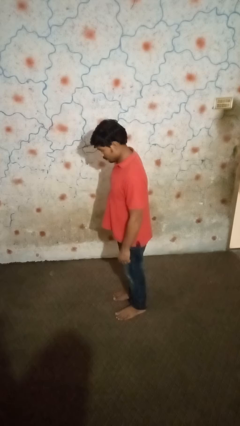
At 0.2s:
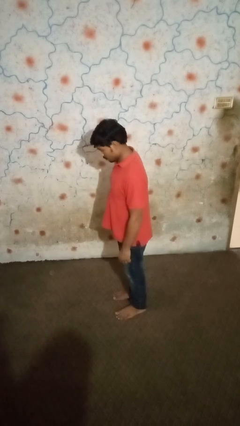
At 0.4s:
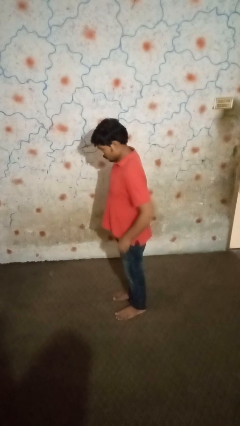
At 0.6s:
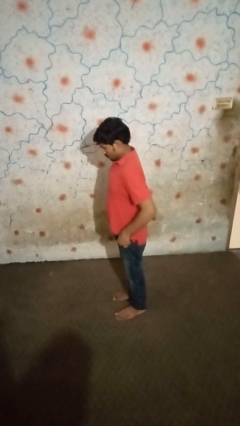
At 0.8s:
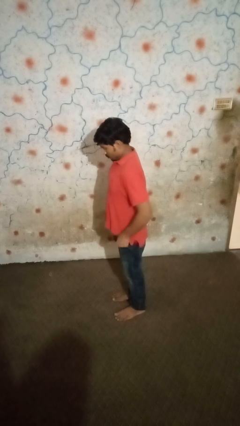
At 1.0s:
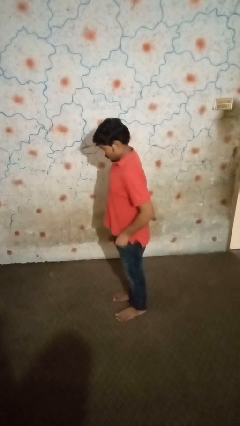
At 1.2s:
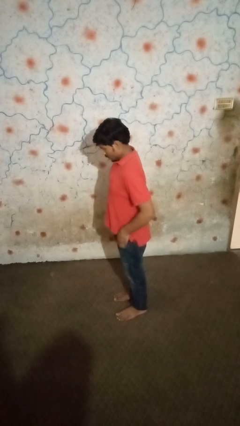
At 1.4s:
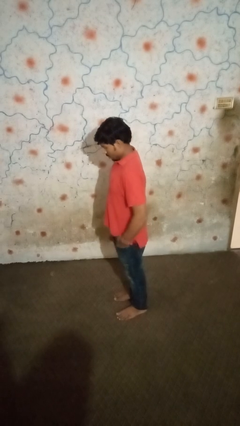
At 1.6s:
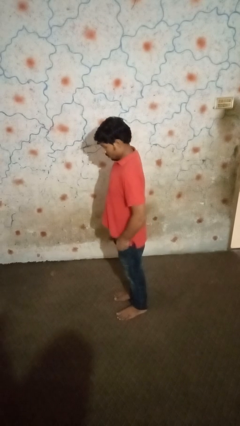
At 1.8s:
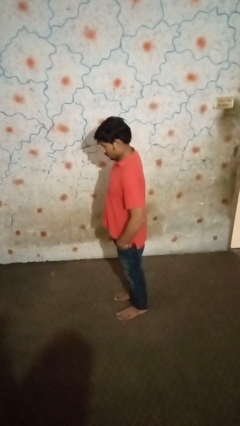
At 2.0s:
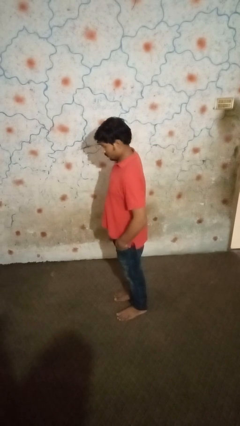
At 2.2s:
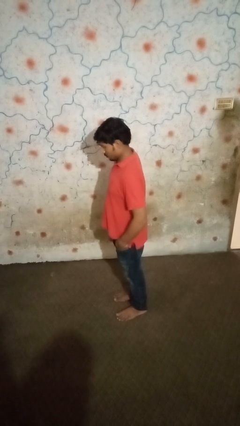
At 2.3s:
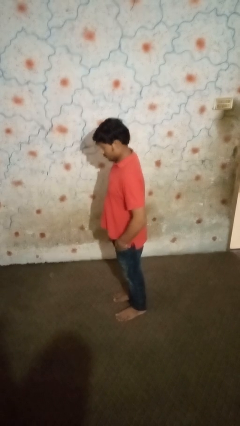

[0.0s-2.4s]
person puts hands in back pockets

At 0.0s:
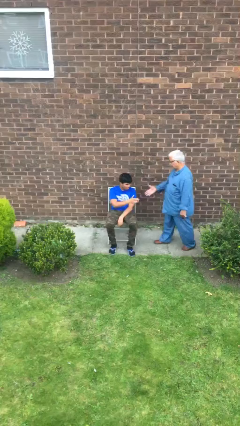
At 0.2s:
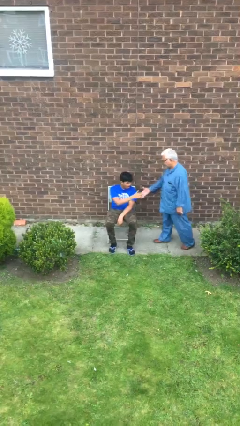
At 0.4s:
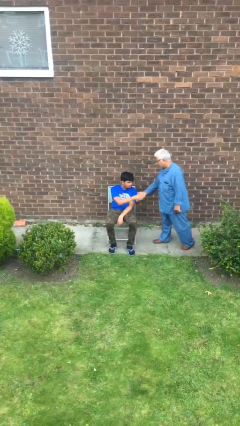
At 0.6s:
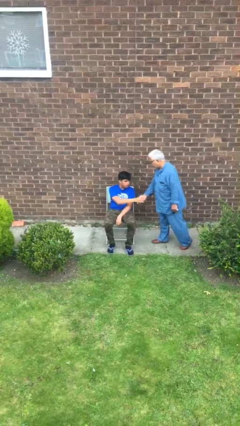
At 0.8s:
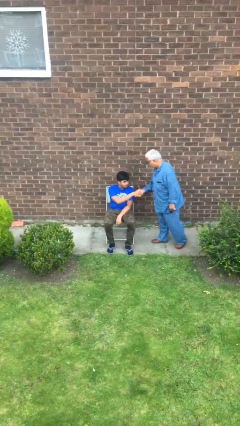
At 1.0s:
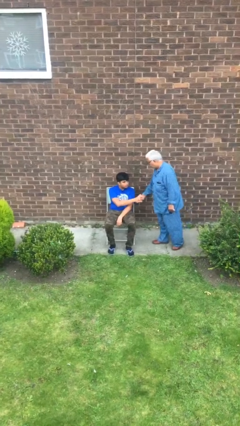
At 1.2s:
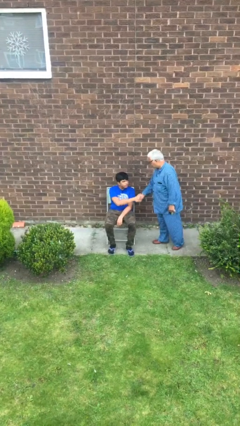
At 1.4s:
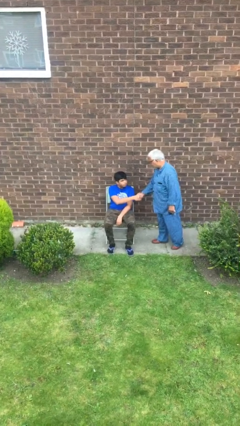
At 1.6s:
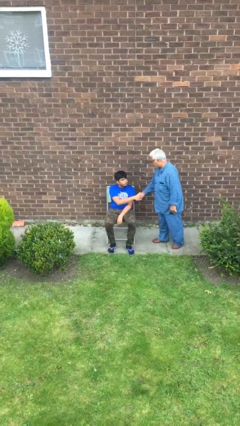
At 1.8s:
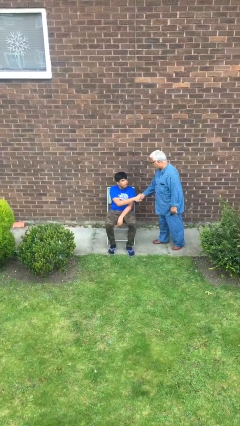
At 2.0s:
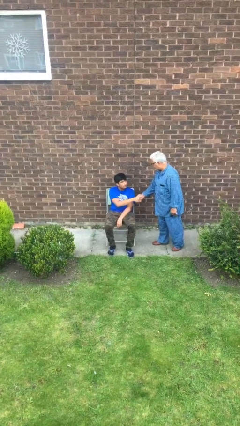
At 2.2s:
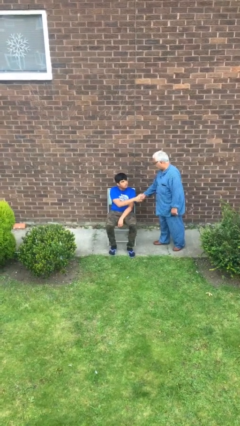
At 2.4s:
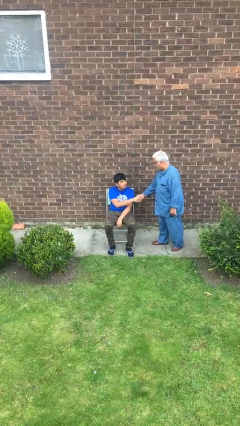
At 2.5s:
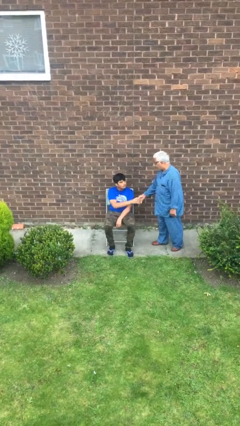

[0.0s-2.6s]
person shakes hand

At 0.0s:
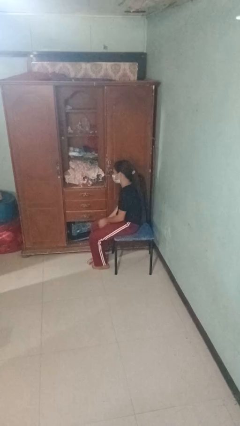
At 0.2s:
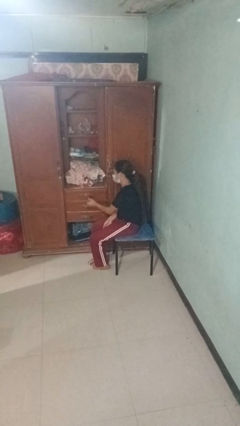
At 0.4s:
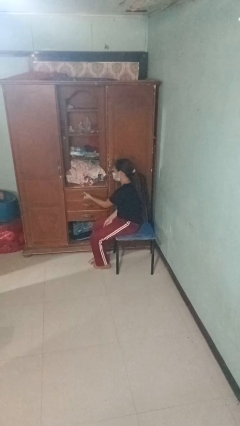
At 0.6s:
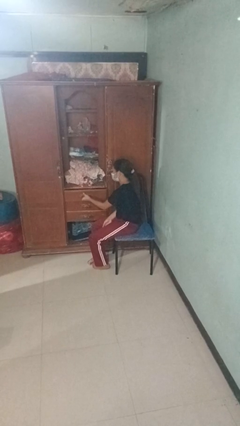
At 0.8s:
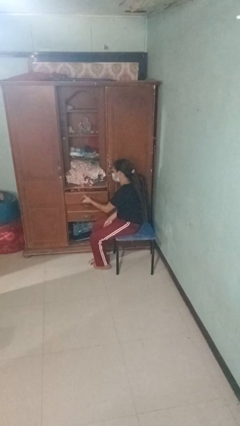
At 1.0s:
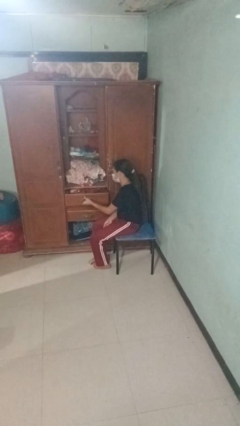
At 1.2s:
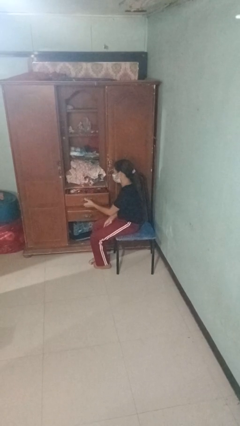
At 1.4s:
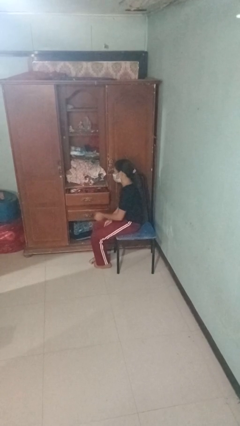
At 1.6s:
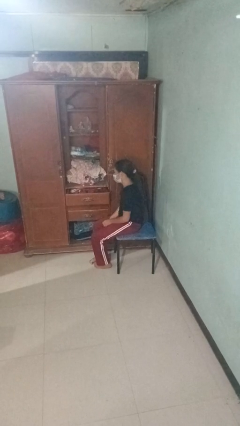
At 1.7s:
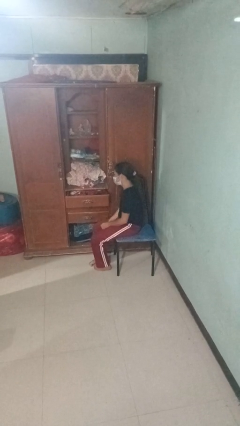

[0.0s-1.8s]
person opens dresser drawer

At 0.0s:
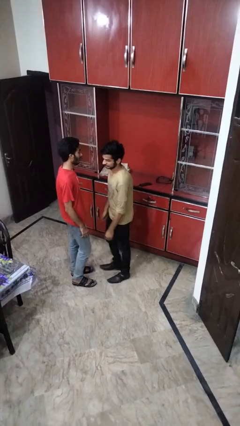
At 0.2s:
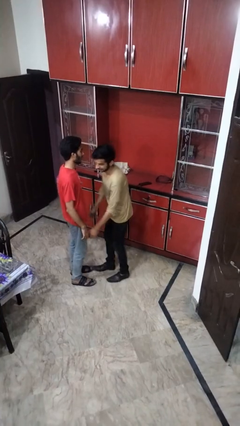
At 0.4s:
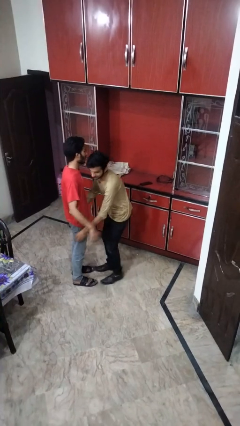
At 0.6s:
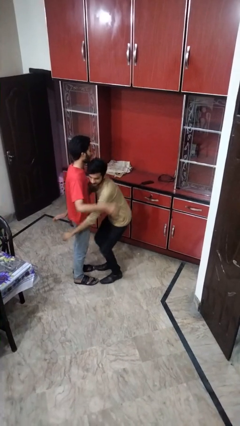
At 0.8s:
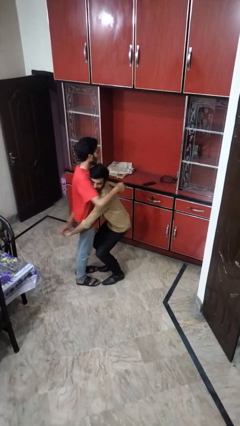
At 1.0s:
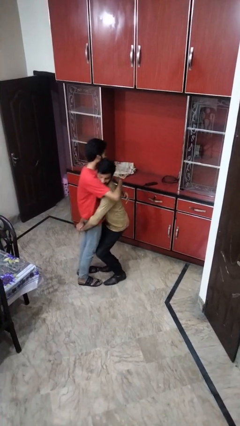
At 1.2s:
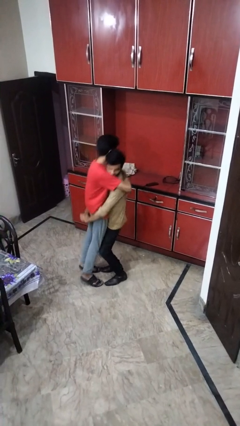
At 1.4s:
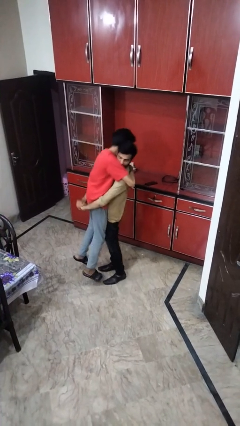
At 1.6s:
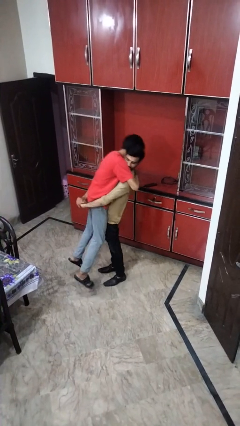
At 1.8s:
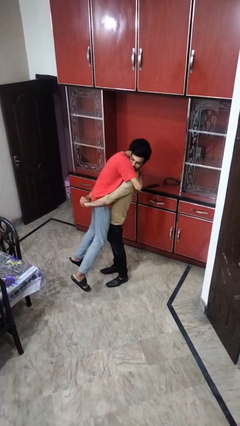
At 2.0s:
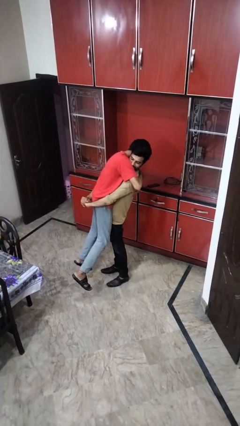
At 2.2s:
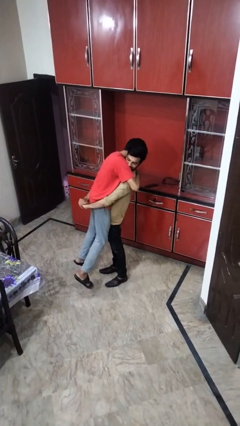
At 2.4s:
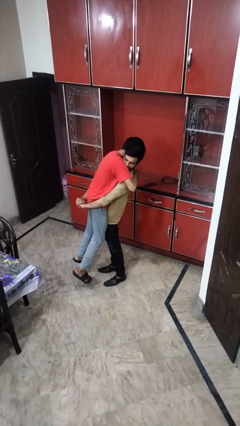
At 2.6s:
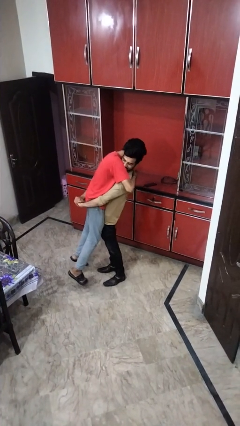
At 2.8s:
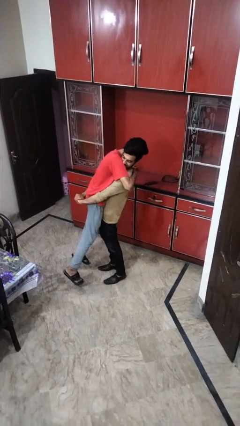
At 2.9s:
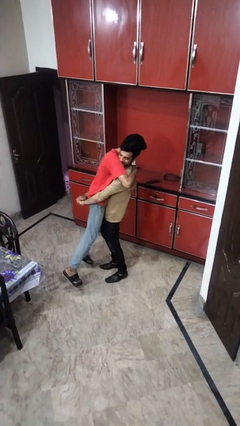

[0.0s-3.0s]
person picks up person

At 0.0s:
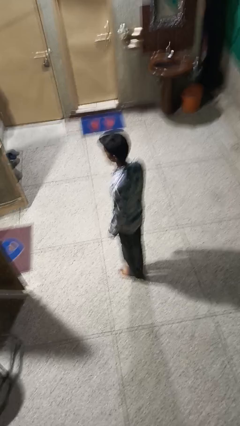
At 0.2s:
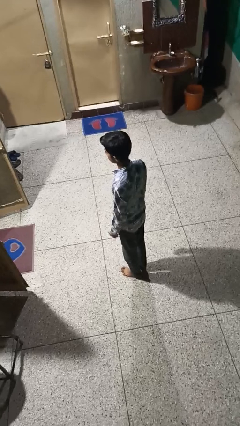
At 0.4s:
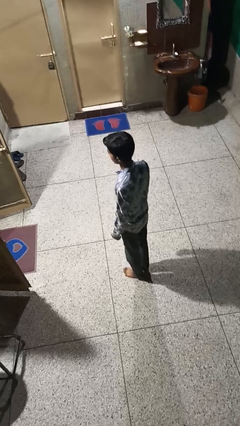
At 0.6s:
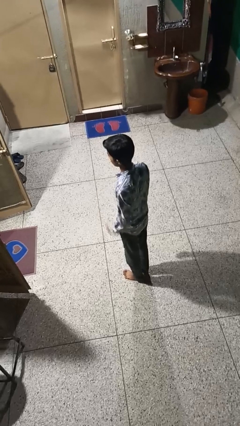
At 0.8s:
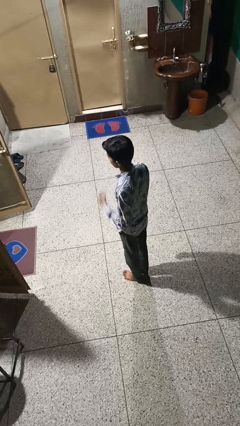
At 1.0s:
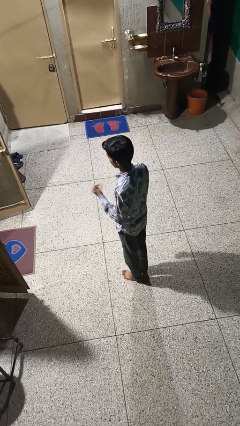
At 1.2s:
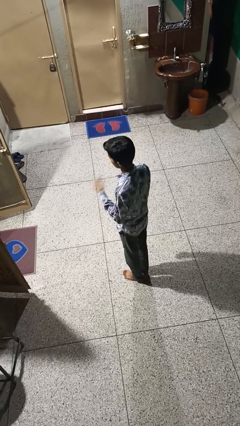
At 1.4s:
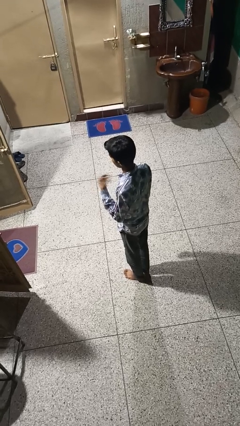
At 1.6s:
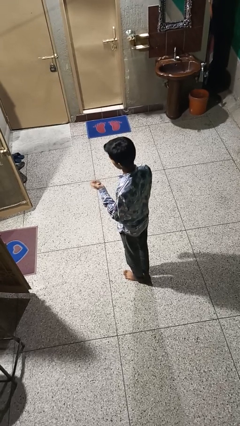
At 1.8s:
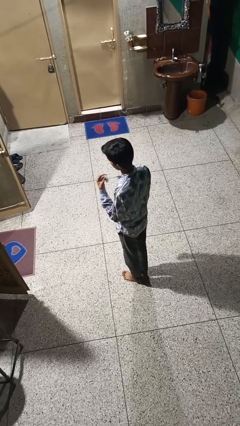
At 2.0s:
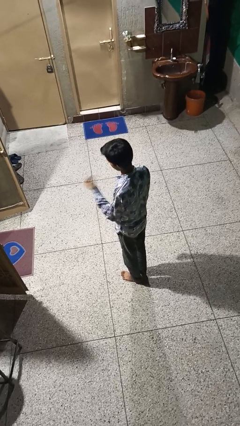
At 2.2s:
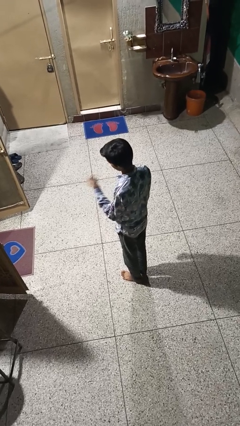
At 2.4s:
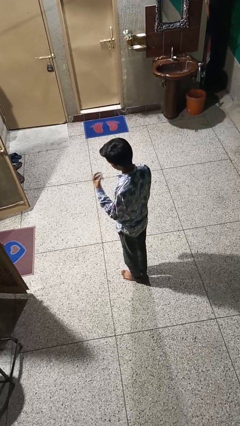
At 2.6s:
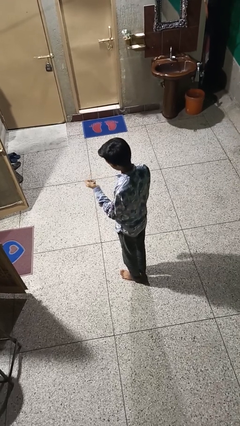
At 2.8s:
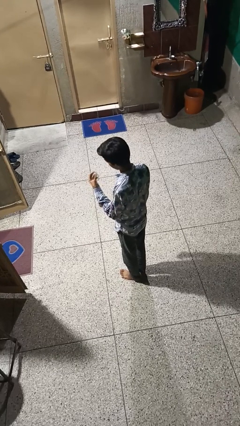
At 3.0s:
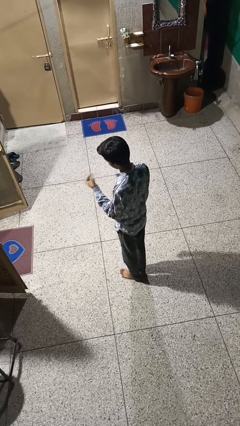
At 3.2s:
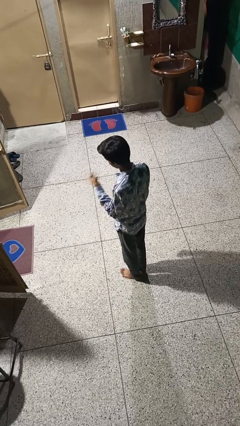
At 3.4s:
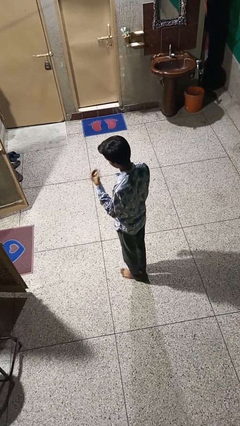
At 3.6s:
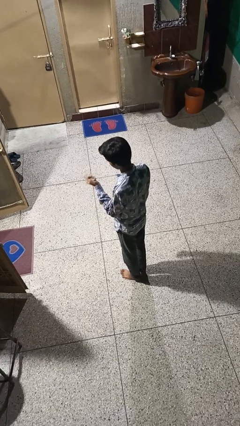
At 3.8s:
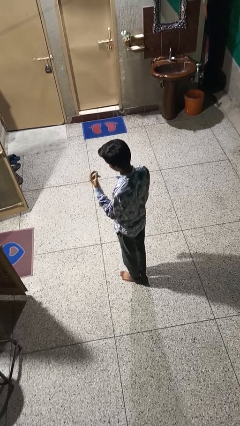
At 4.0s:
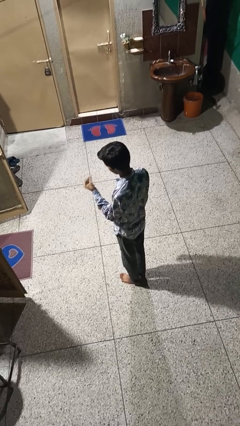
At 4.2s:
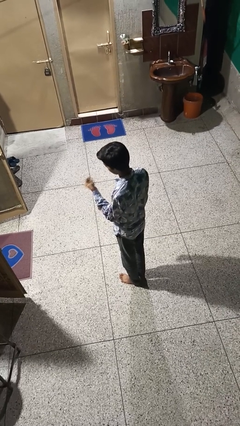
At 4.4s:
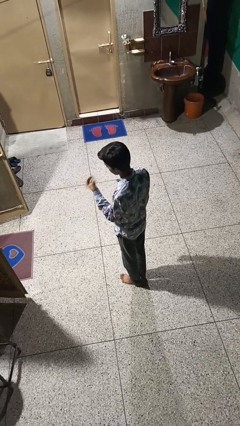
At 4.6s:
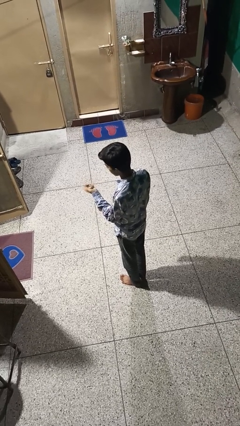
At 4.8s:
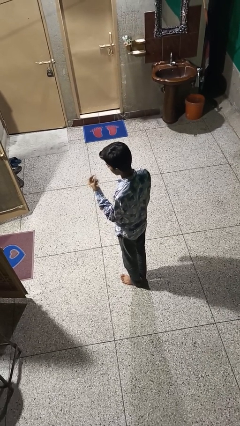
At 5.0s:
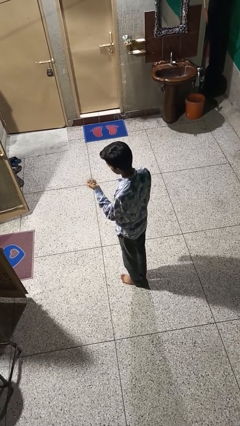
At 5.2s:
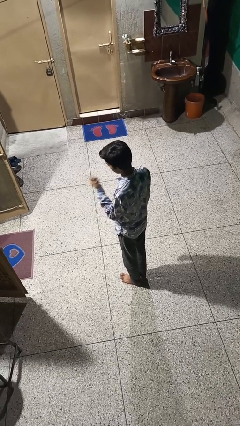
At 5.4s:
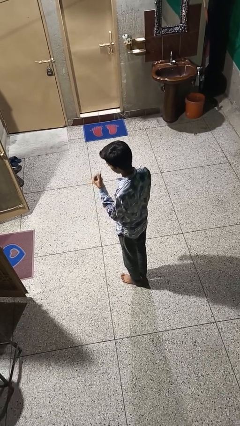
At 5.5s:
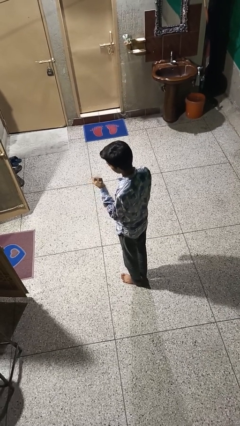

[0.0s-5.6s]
person snaps fingers

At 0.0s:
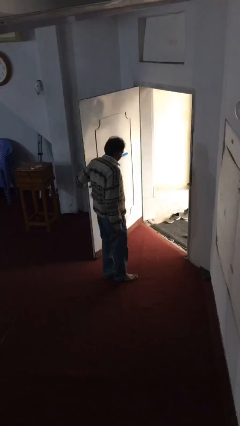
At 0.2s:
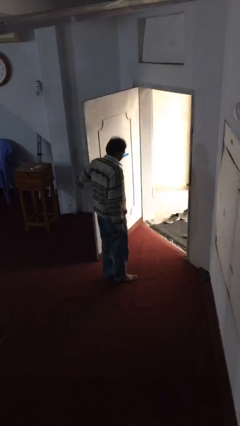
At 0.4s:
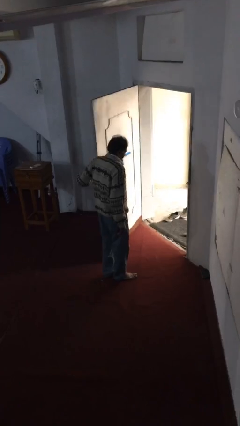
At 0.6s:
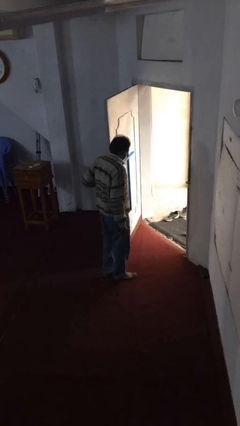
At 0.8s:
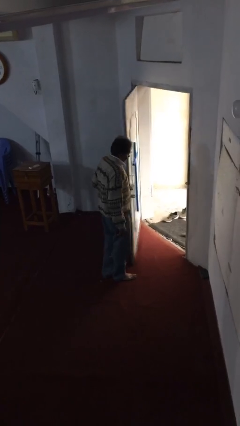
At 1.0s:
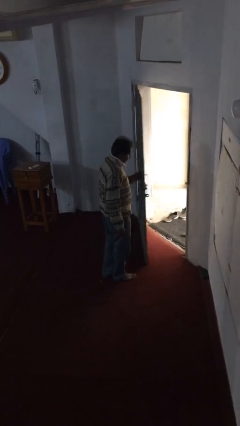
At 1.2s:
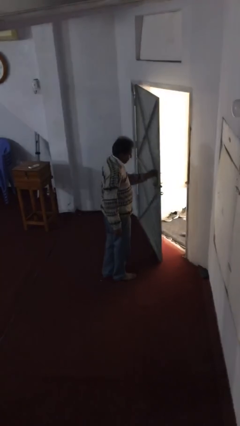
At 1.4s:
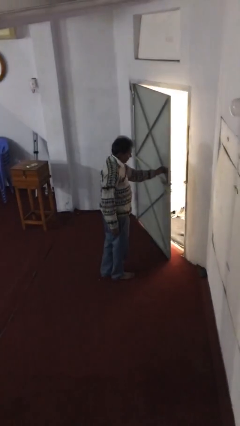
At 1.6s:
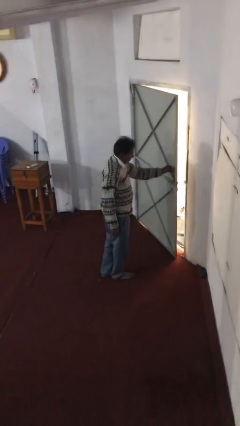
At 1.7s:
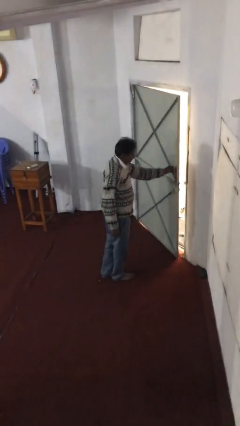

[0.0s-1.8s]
person closes facility door

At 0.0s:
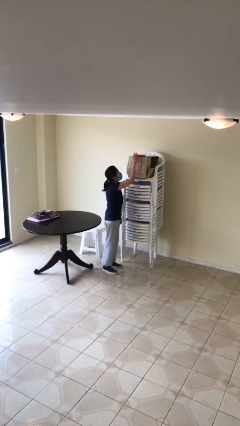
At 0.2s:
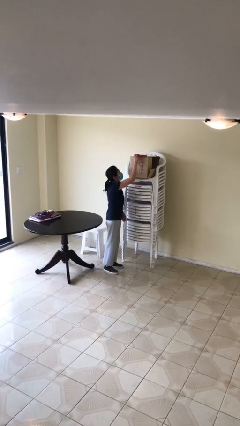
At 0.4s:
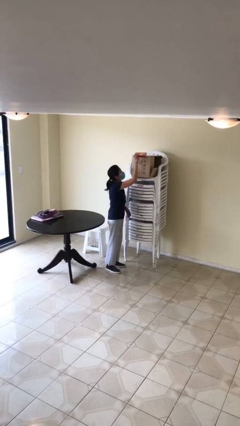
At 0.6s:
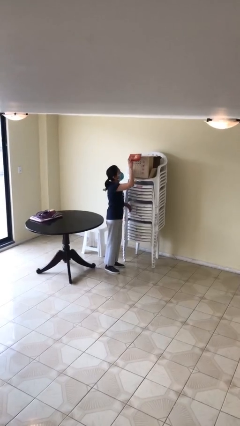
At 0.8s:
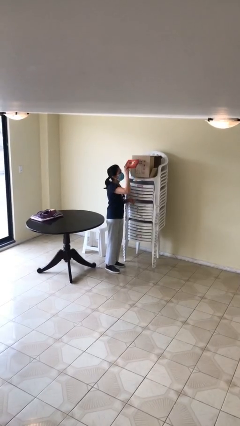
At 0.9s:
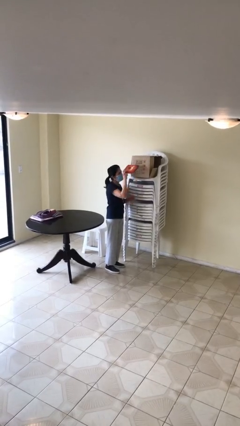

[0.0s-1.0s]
person picks up object from shelf
